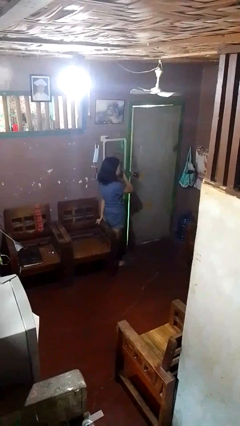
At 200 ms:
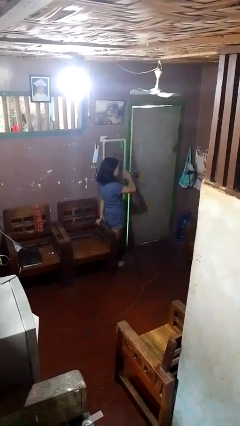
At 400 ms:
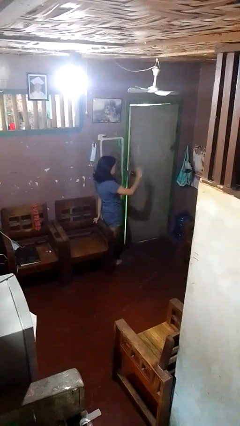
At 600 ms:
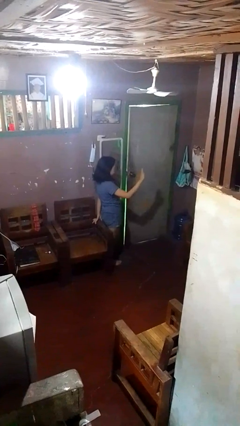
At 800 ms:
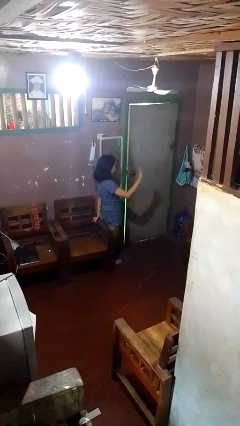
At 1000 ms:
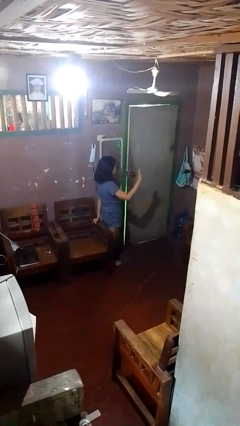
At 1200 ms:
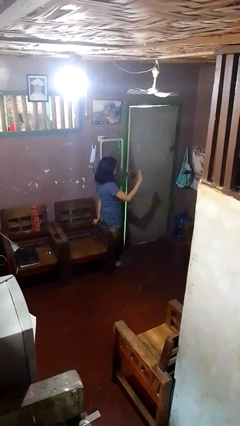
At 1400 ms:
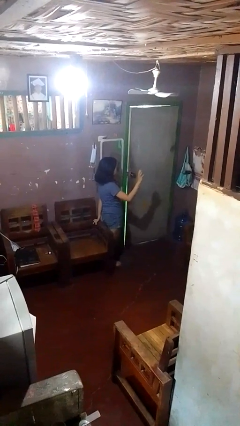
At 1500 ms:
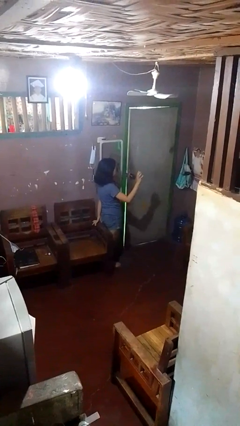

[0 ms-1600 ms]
person gestures swipe right

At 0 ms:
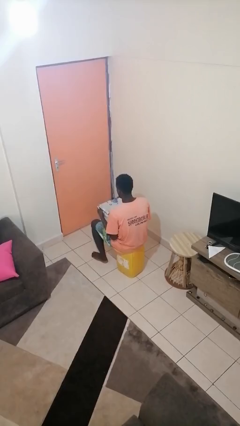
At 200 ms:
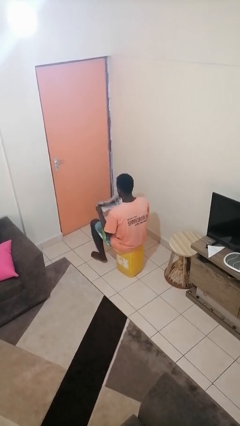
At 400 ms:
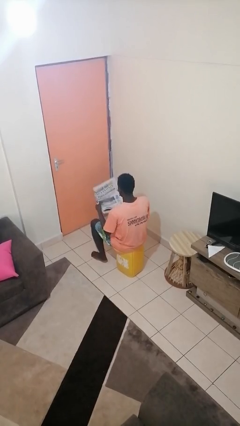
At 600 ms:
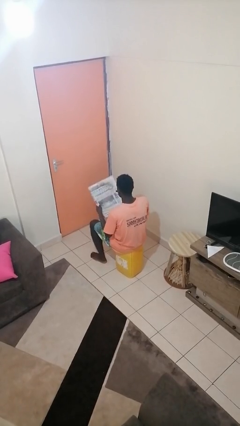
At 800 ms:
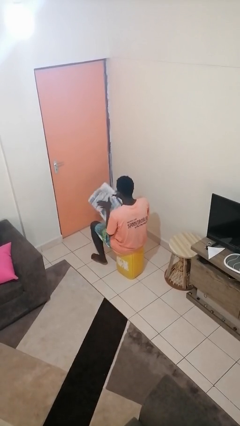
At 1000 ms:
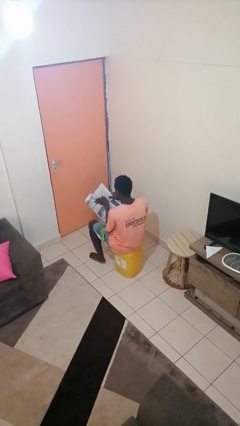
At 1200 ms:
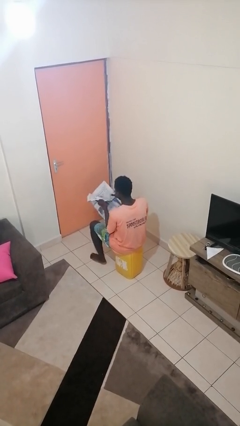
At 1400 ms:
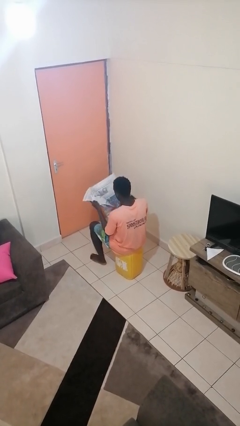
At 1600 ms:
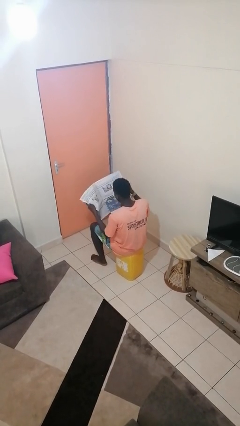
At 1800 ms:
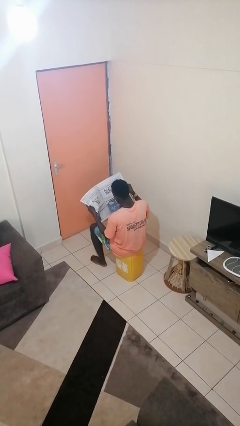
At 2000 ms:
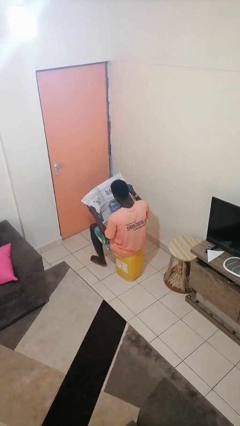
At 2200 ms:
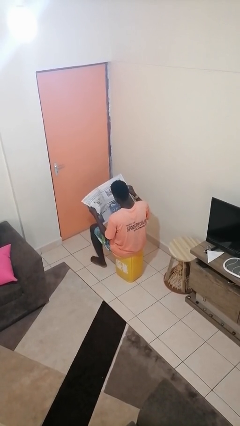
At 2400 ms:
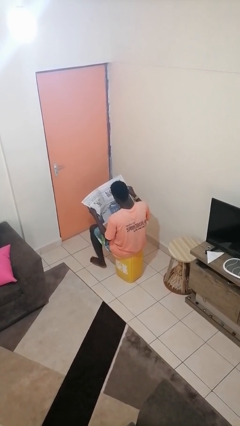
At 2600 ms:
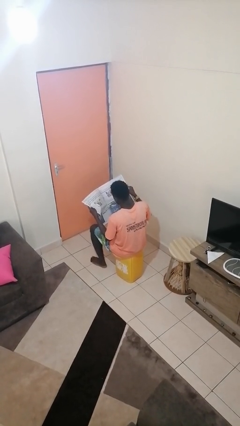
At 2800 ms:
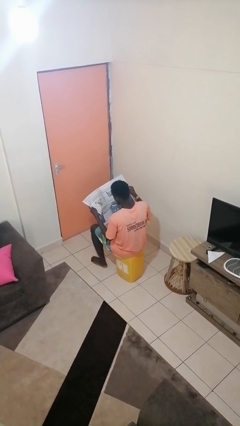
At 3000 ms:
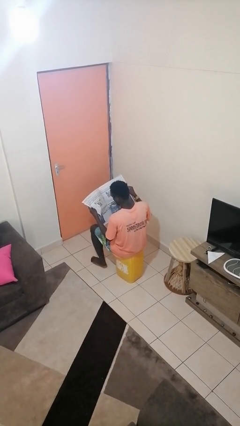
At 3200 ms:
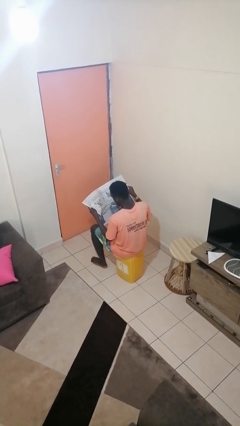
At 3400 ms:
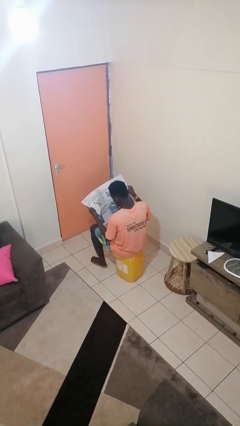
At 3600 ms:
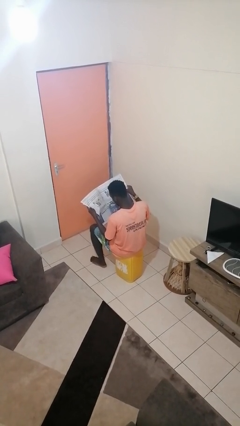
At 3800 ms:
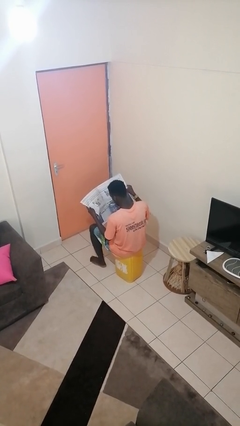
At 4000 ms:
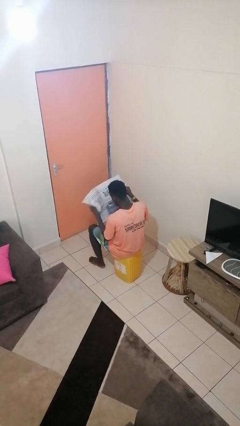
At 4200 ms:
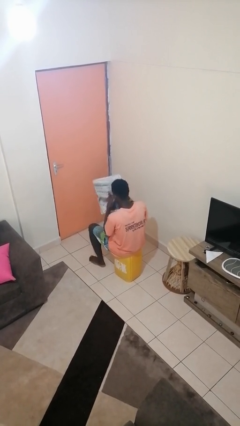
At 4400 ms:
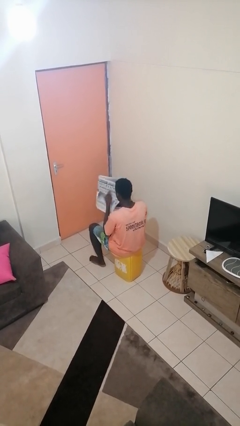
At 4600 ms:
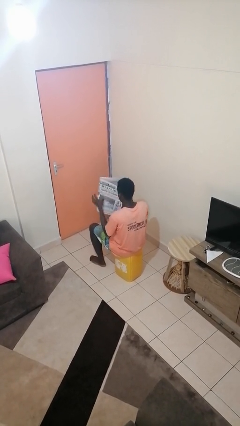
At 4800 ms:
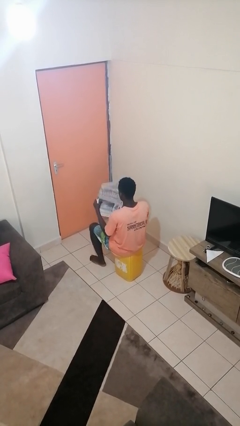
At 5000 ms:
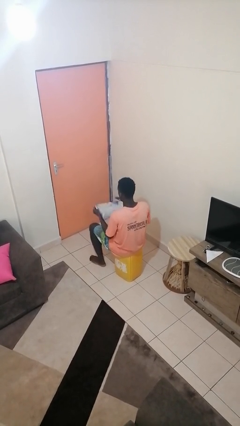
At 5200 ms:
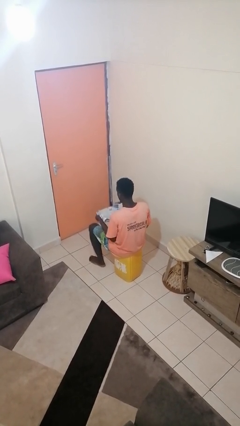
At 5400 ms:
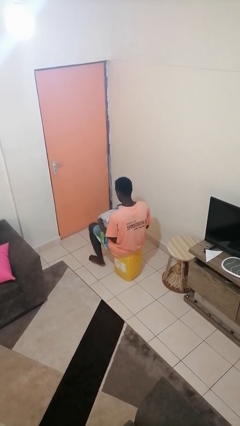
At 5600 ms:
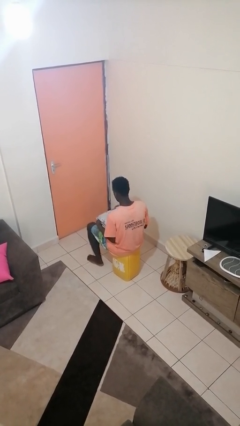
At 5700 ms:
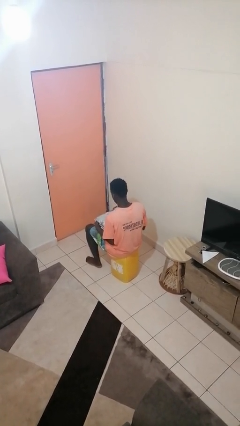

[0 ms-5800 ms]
person reads newspaper

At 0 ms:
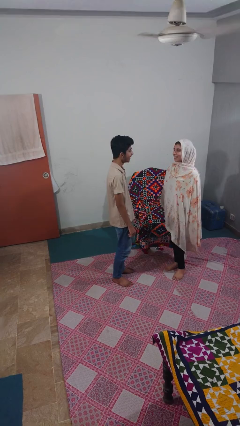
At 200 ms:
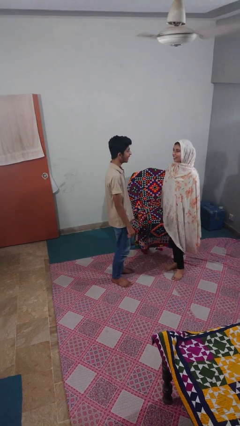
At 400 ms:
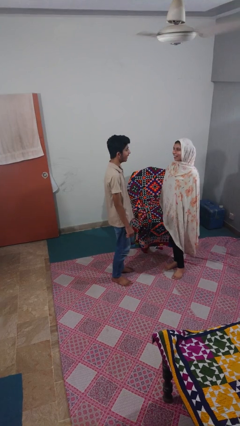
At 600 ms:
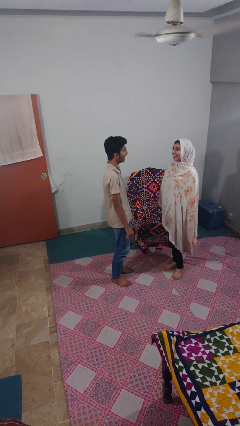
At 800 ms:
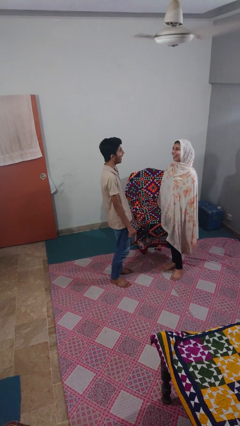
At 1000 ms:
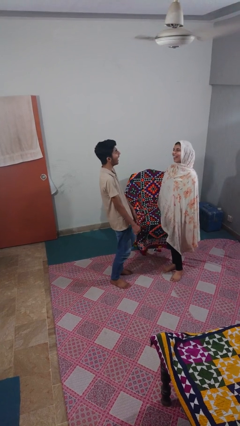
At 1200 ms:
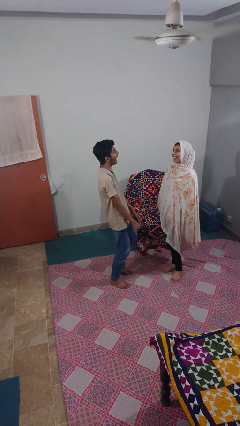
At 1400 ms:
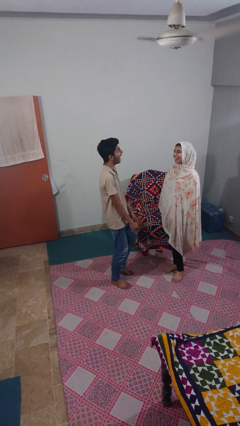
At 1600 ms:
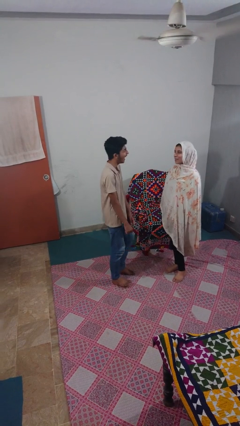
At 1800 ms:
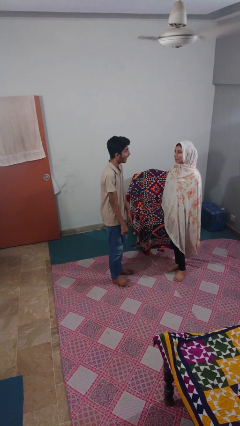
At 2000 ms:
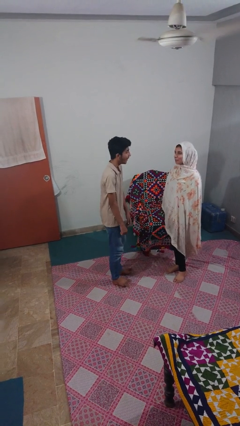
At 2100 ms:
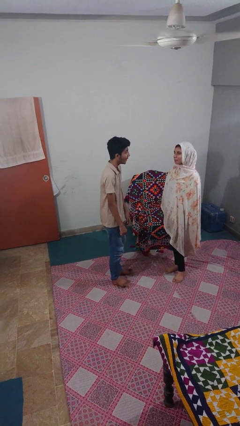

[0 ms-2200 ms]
person laughs with person

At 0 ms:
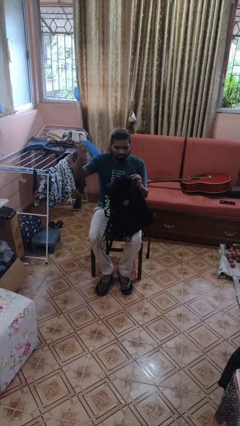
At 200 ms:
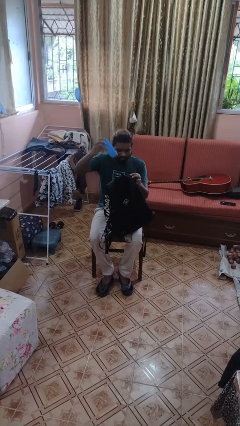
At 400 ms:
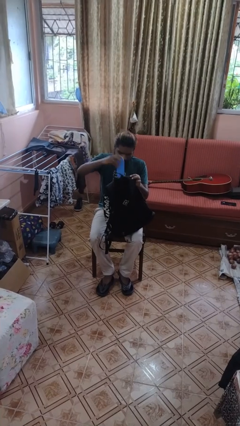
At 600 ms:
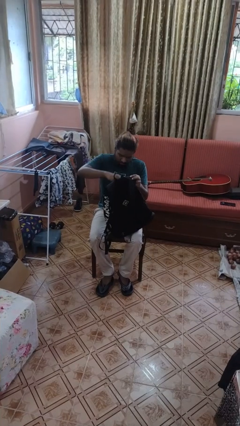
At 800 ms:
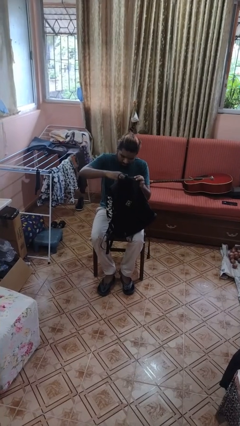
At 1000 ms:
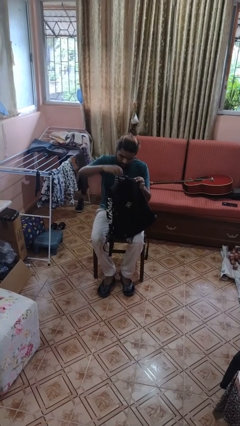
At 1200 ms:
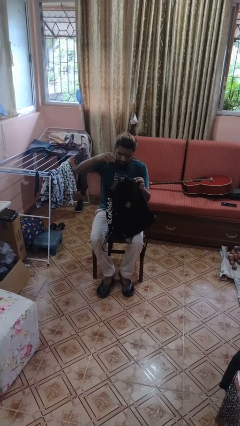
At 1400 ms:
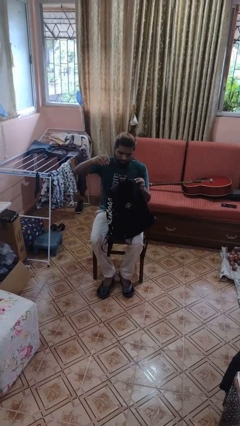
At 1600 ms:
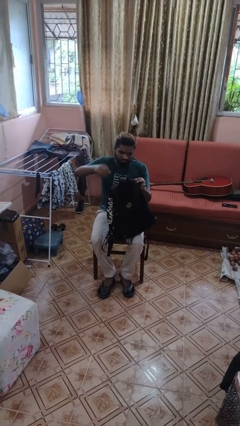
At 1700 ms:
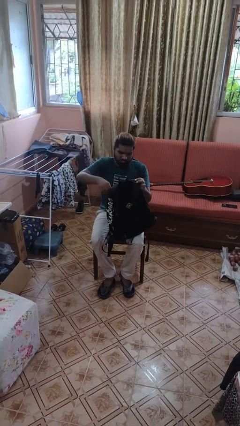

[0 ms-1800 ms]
person puts object into backpack

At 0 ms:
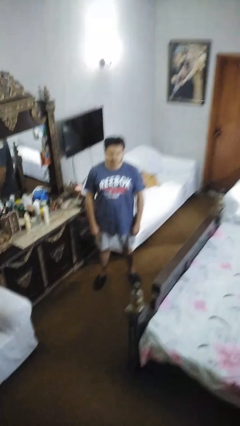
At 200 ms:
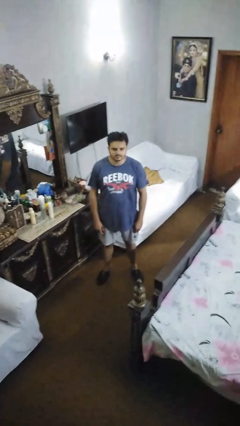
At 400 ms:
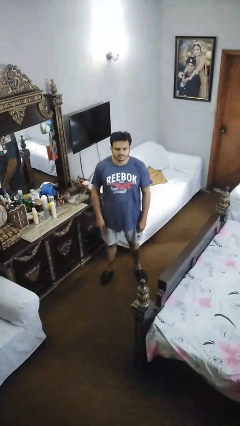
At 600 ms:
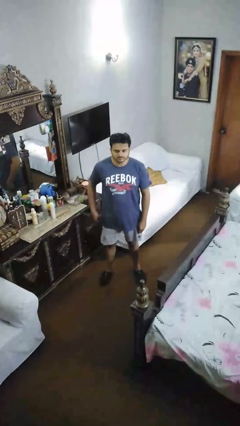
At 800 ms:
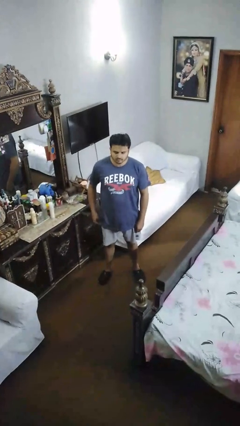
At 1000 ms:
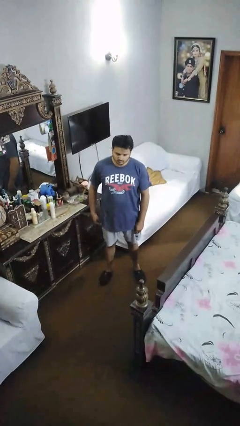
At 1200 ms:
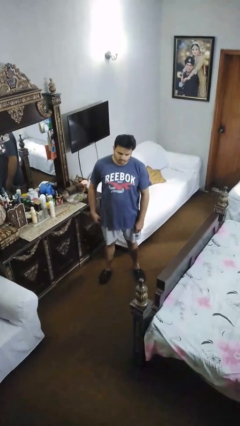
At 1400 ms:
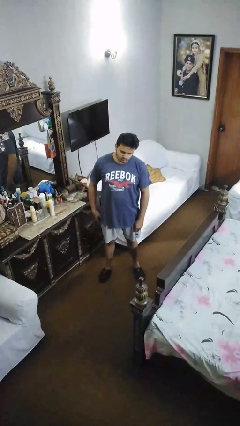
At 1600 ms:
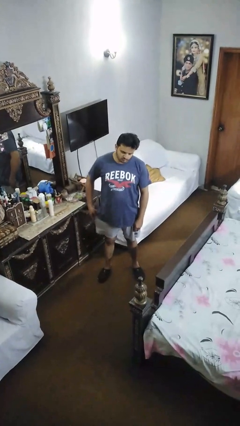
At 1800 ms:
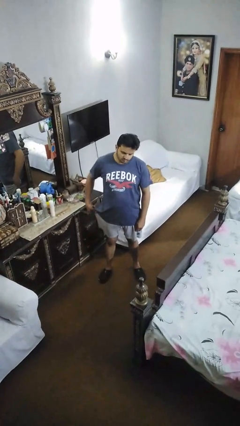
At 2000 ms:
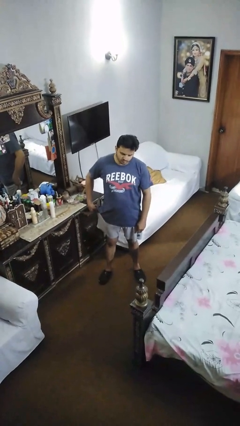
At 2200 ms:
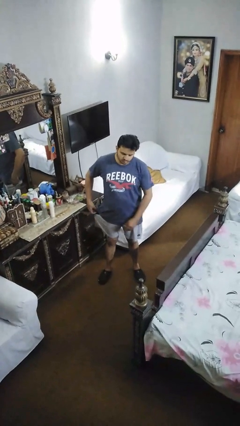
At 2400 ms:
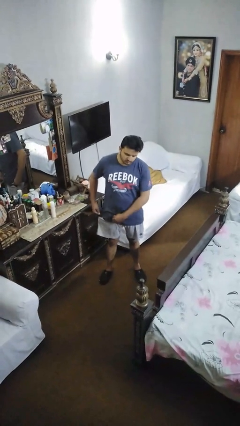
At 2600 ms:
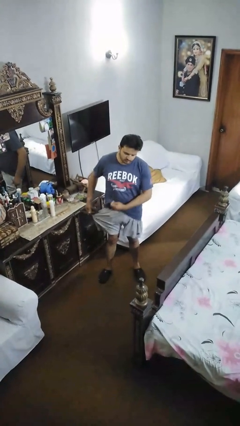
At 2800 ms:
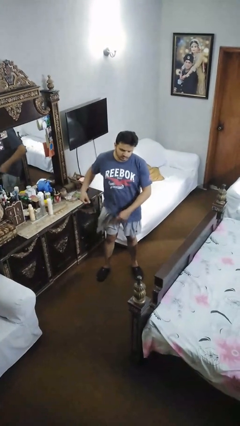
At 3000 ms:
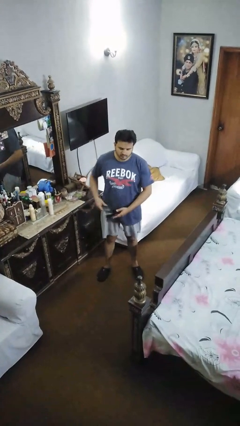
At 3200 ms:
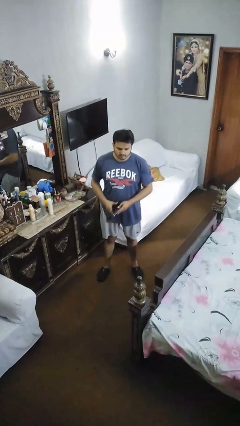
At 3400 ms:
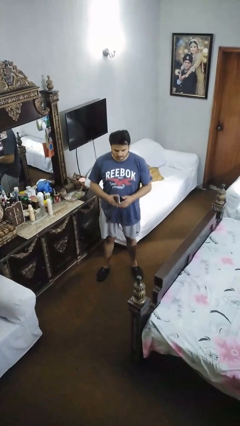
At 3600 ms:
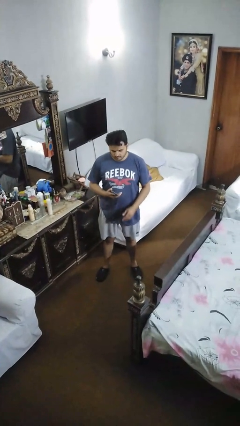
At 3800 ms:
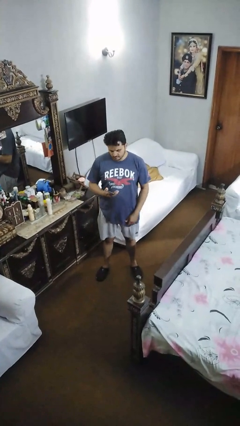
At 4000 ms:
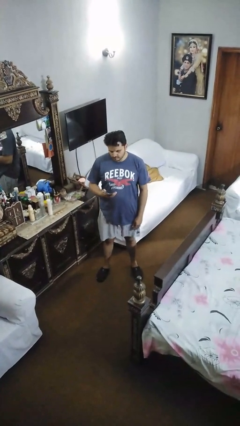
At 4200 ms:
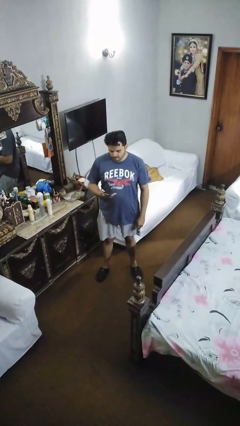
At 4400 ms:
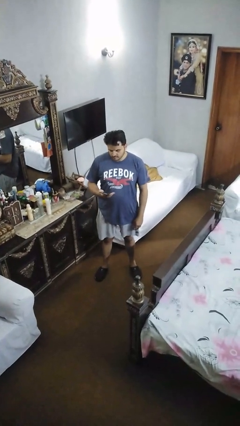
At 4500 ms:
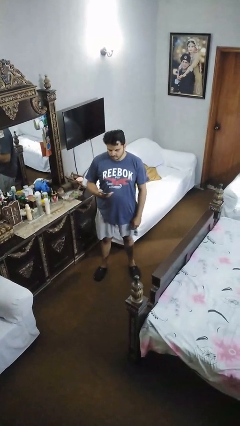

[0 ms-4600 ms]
person takes phone from pocket

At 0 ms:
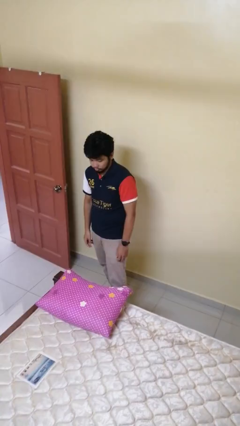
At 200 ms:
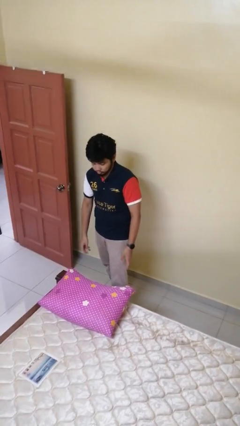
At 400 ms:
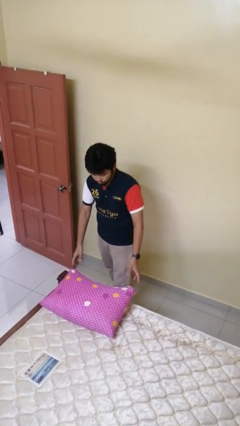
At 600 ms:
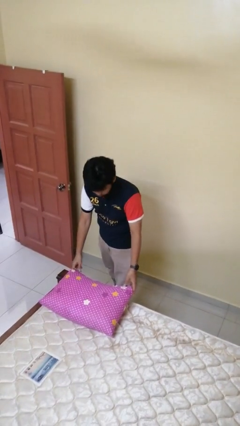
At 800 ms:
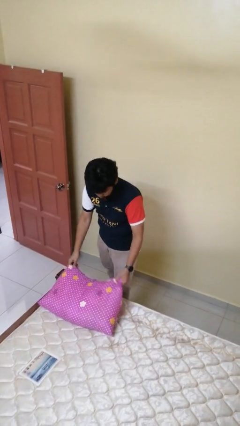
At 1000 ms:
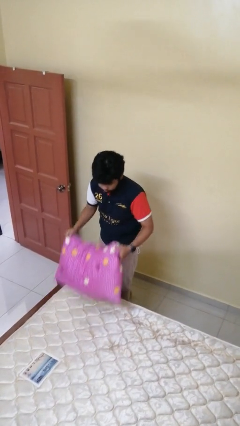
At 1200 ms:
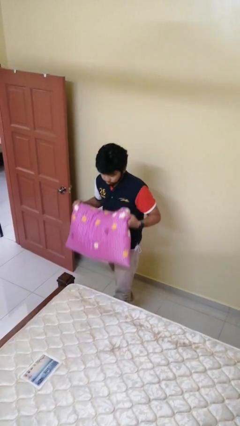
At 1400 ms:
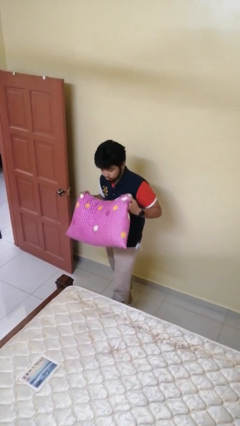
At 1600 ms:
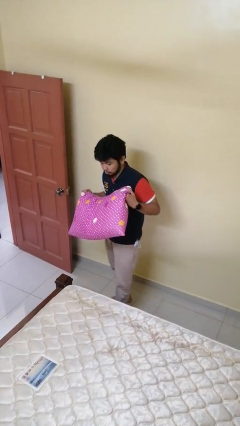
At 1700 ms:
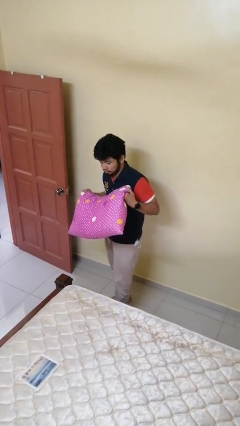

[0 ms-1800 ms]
person picks up object from bed
